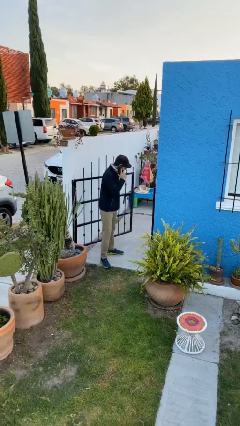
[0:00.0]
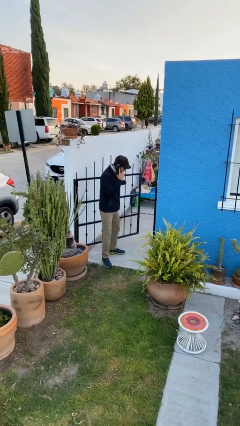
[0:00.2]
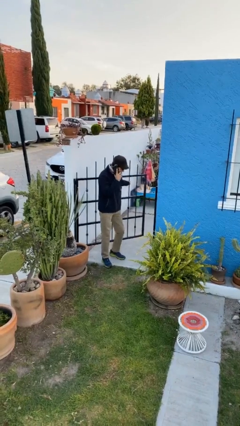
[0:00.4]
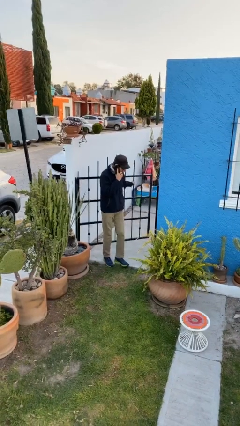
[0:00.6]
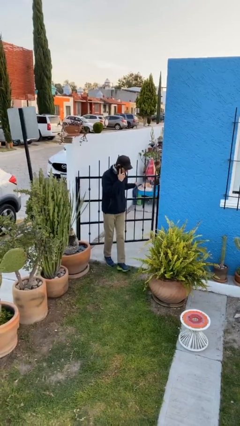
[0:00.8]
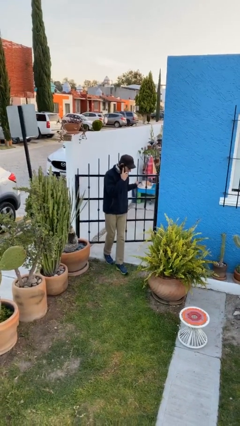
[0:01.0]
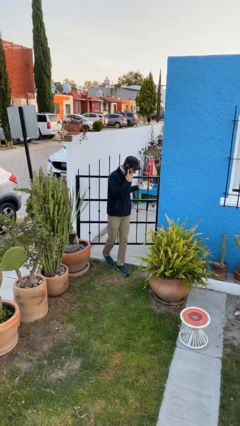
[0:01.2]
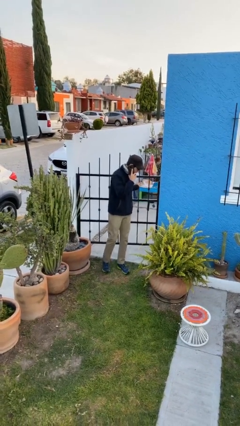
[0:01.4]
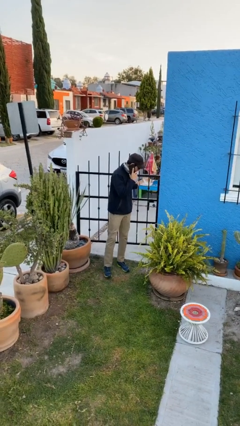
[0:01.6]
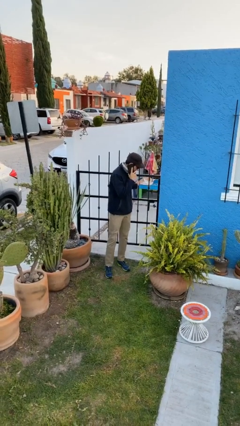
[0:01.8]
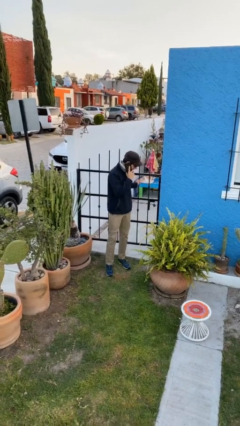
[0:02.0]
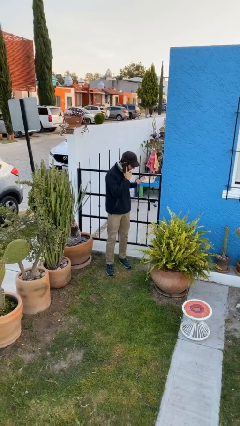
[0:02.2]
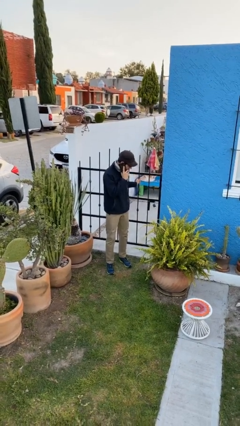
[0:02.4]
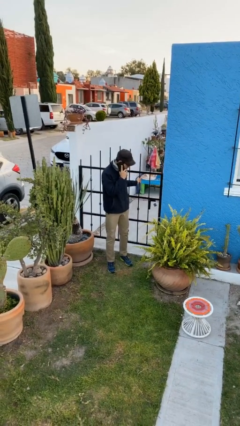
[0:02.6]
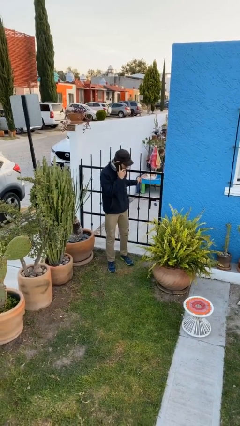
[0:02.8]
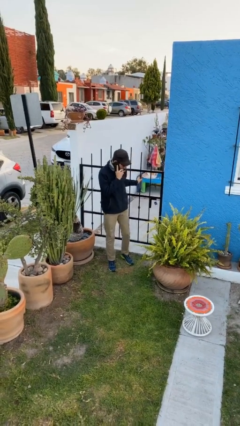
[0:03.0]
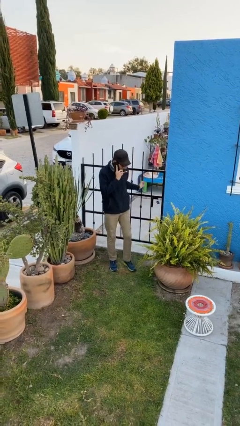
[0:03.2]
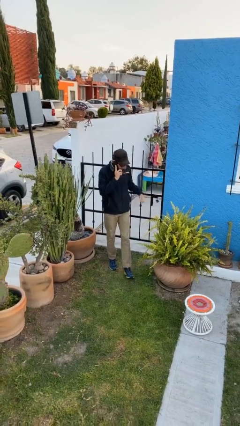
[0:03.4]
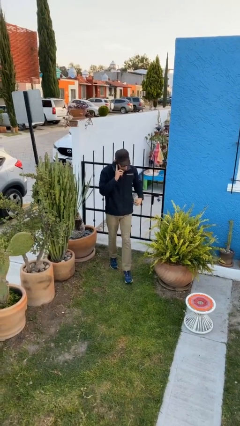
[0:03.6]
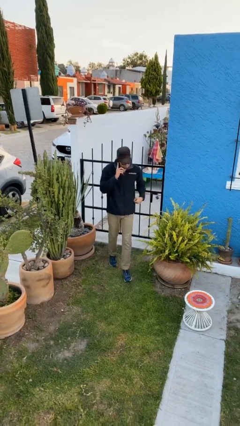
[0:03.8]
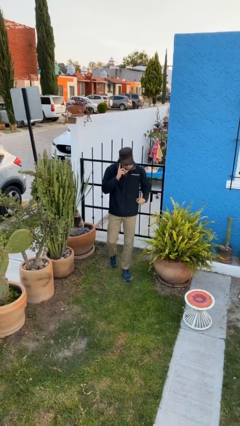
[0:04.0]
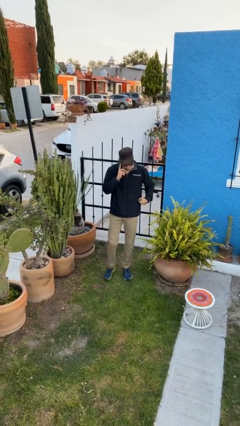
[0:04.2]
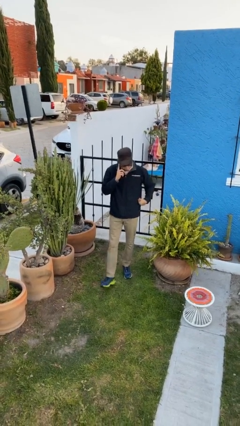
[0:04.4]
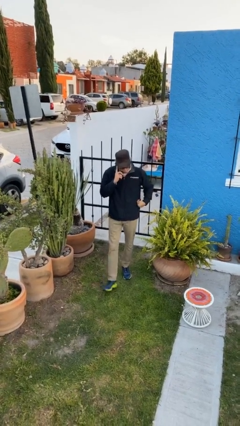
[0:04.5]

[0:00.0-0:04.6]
person closes facility door

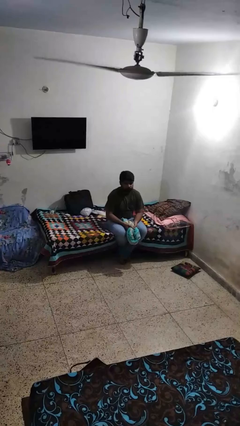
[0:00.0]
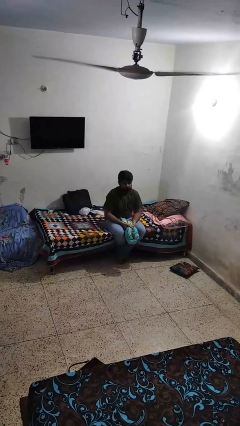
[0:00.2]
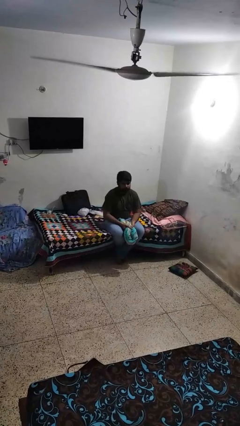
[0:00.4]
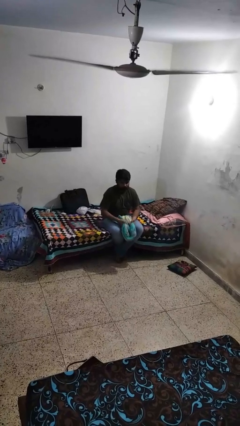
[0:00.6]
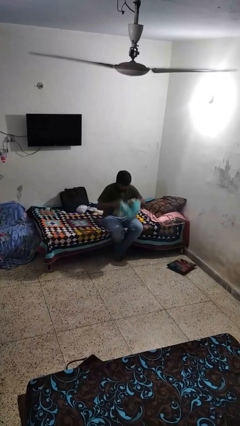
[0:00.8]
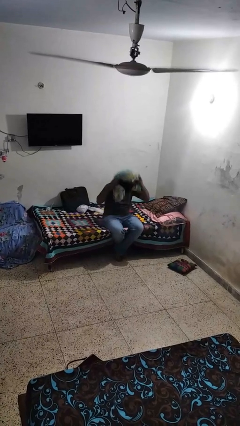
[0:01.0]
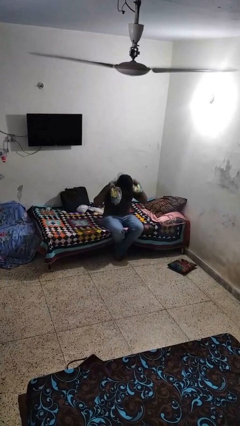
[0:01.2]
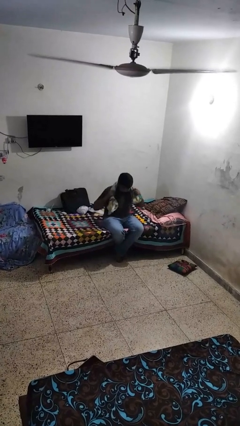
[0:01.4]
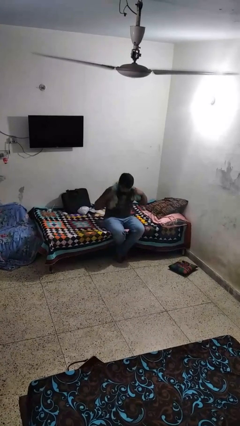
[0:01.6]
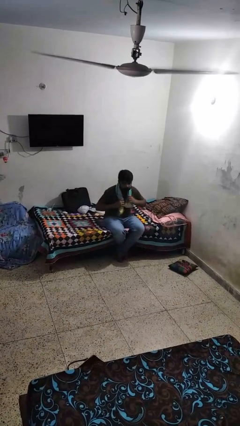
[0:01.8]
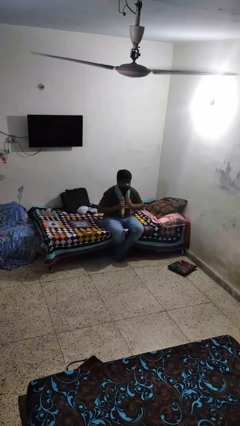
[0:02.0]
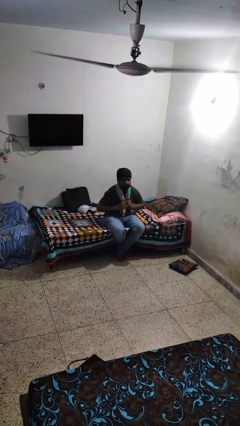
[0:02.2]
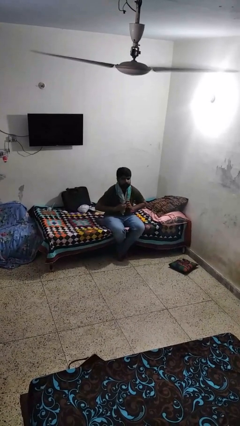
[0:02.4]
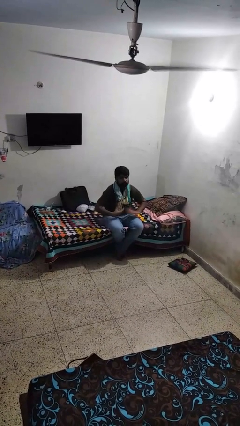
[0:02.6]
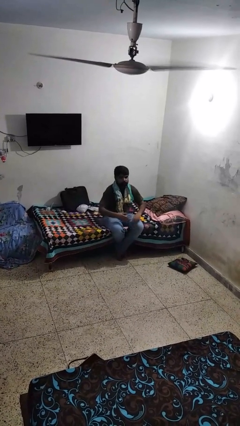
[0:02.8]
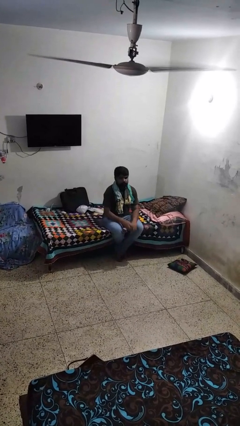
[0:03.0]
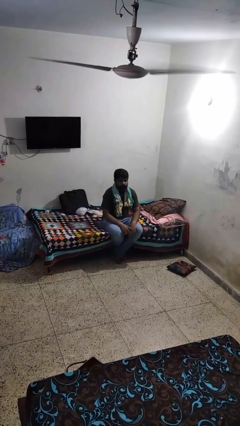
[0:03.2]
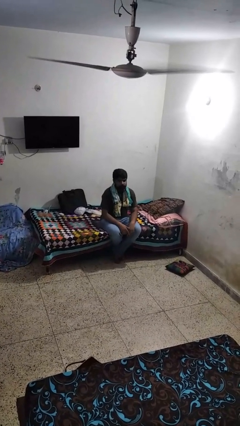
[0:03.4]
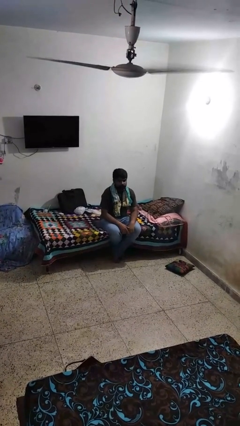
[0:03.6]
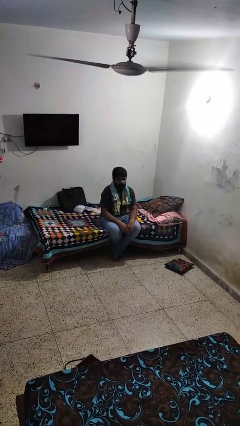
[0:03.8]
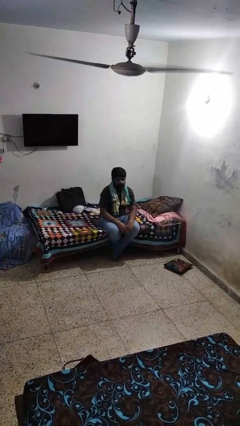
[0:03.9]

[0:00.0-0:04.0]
person puts on scarf

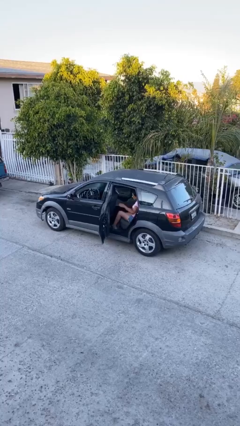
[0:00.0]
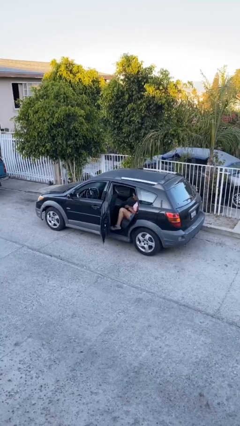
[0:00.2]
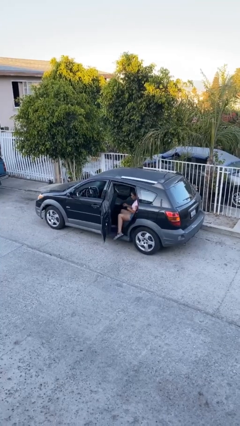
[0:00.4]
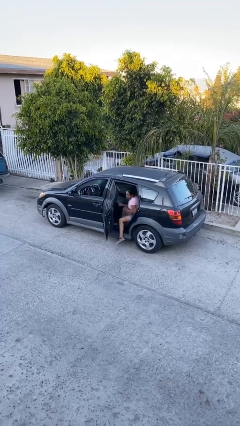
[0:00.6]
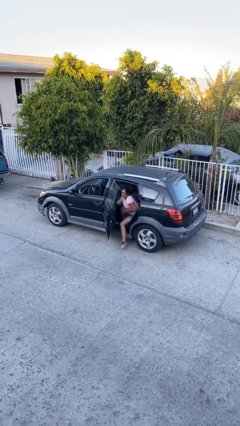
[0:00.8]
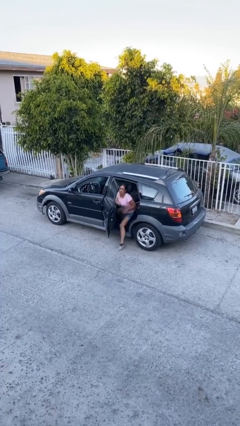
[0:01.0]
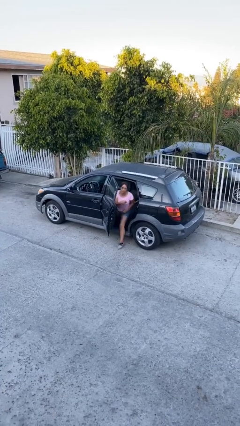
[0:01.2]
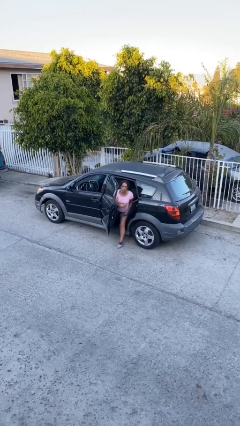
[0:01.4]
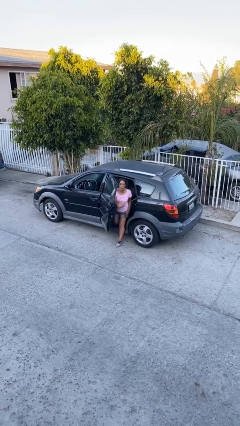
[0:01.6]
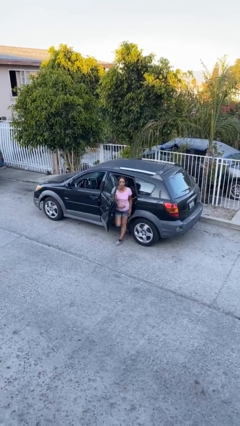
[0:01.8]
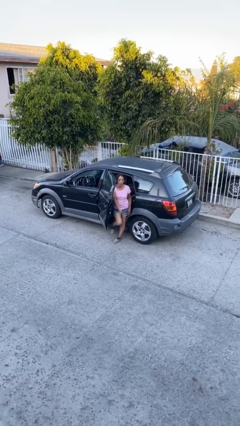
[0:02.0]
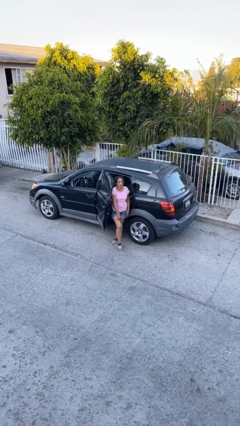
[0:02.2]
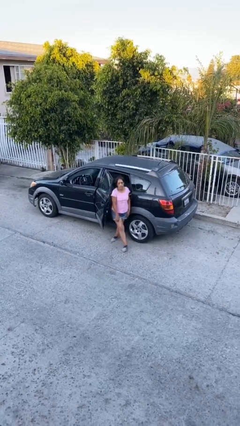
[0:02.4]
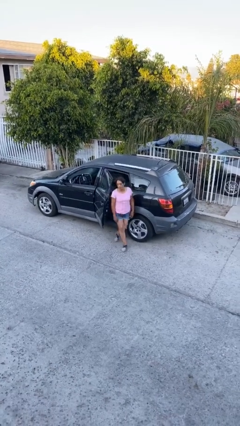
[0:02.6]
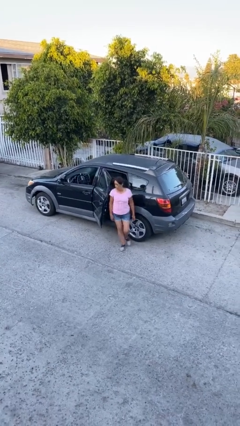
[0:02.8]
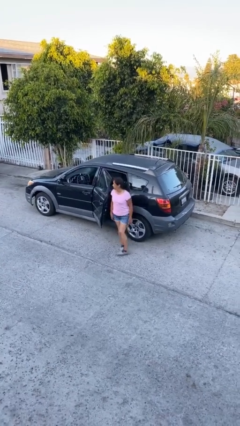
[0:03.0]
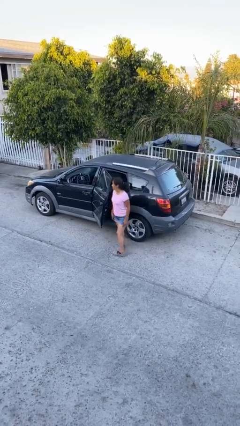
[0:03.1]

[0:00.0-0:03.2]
person exits car

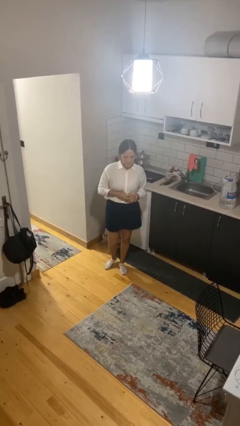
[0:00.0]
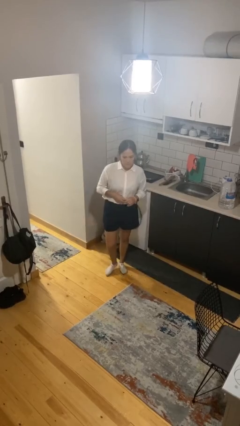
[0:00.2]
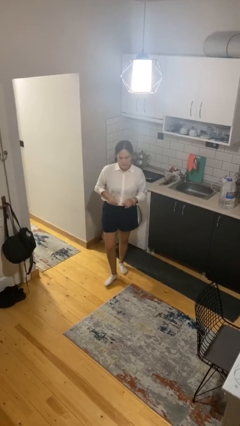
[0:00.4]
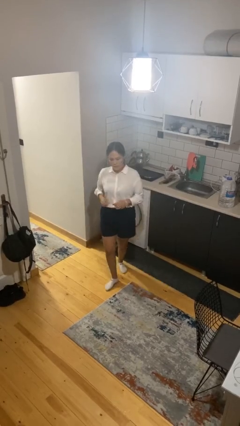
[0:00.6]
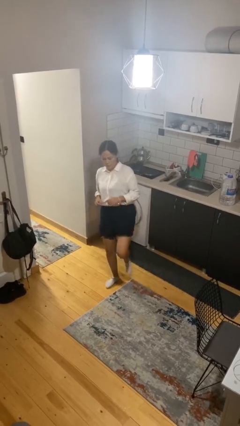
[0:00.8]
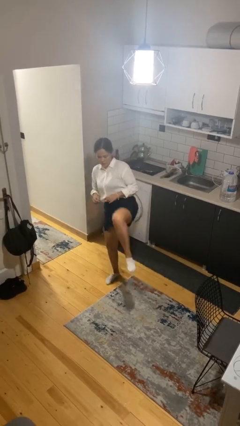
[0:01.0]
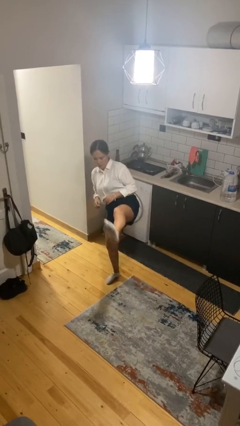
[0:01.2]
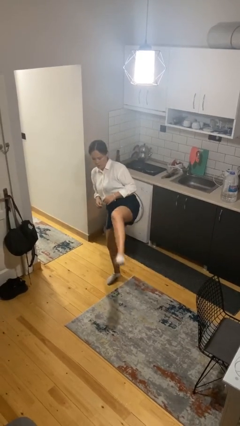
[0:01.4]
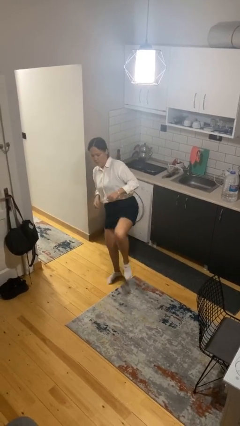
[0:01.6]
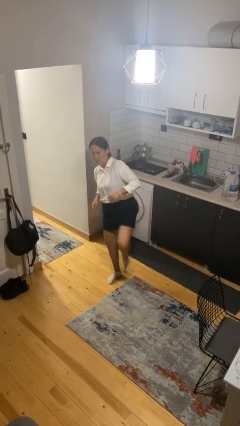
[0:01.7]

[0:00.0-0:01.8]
person karate kicks

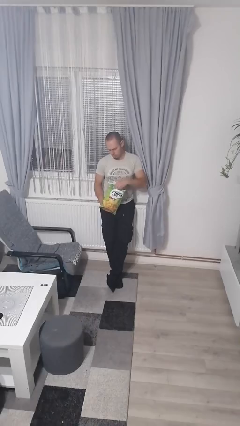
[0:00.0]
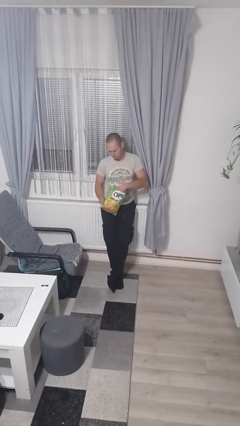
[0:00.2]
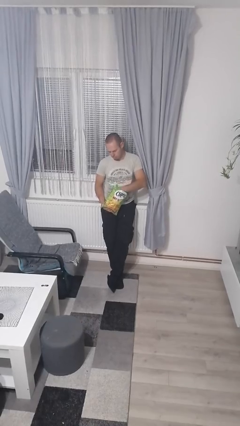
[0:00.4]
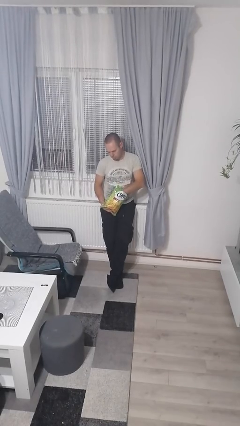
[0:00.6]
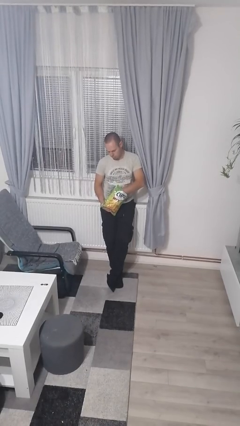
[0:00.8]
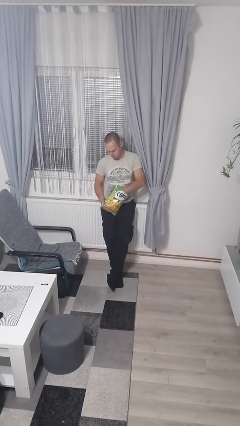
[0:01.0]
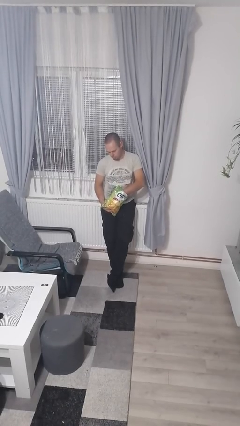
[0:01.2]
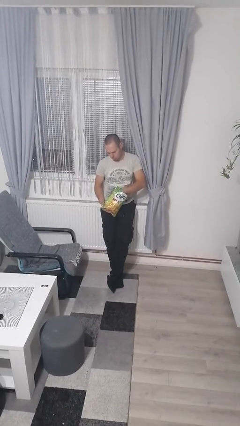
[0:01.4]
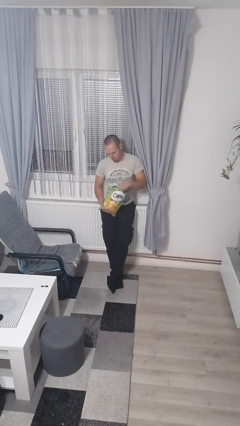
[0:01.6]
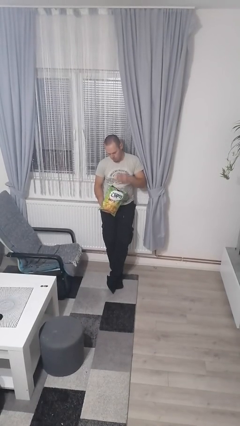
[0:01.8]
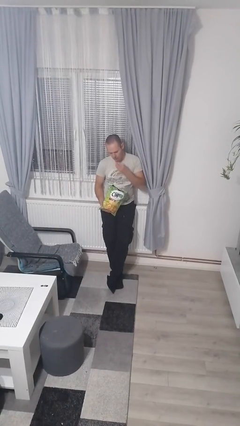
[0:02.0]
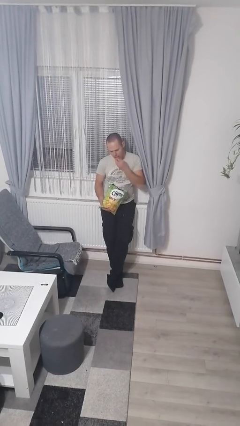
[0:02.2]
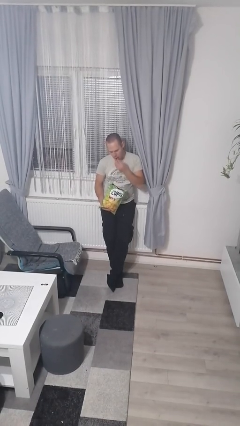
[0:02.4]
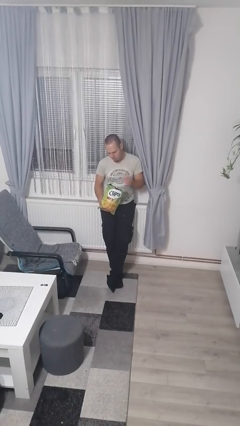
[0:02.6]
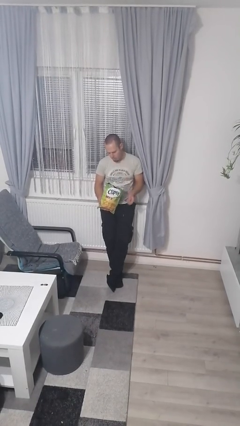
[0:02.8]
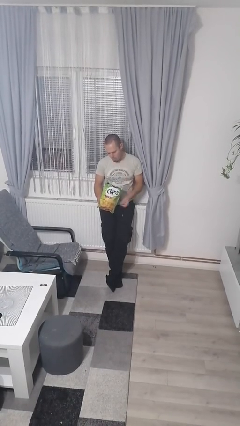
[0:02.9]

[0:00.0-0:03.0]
person eats snack from bag

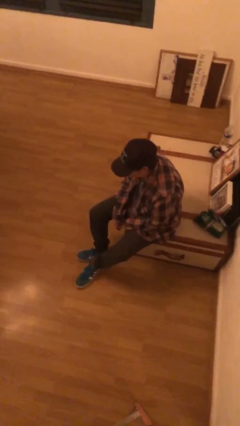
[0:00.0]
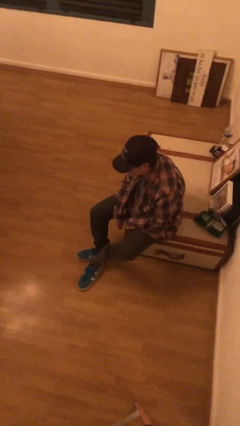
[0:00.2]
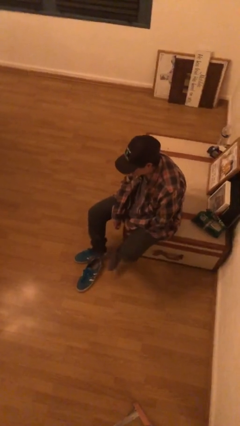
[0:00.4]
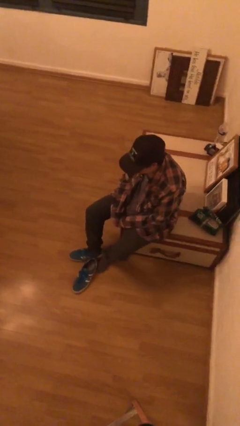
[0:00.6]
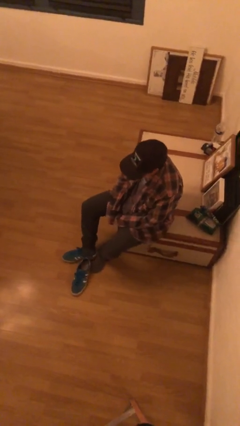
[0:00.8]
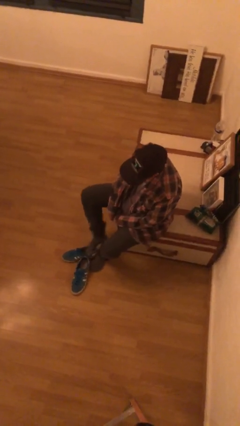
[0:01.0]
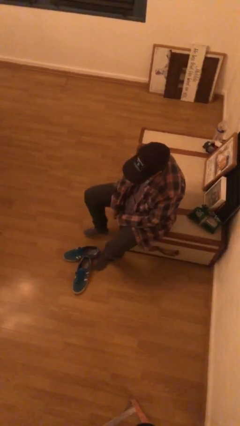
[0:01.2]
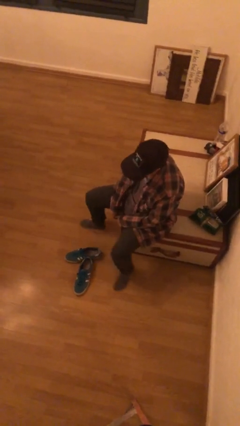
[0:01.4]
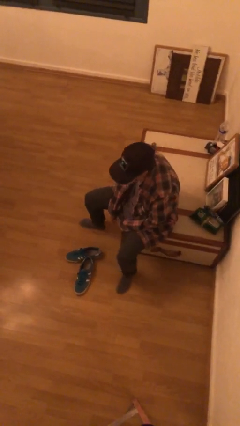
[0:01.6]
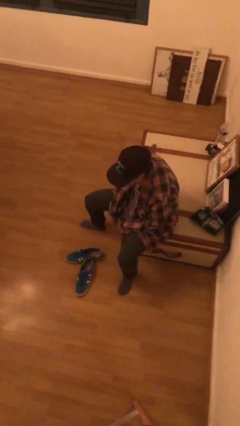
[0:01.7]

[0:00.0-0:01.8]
person takes off shoes
